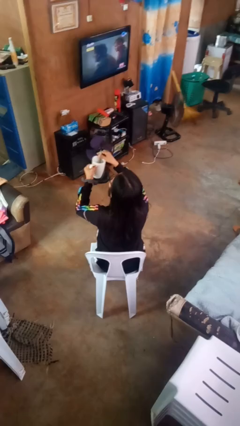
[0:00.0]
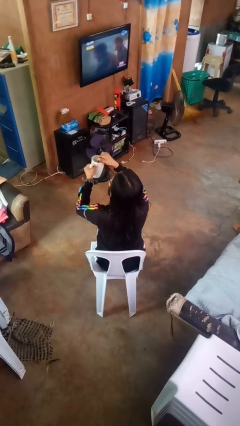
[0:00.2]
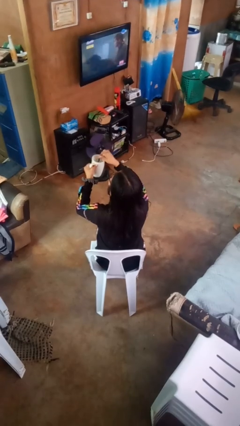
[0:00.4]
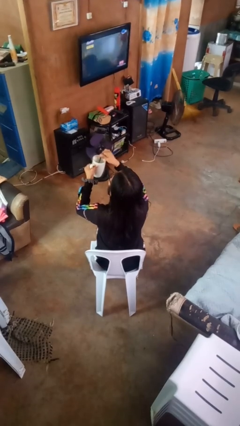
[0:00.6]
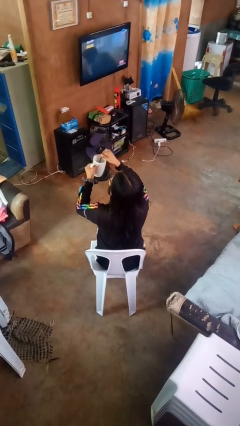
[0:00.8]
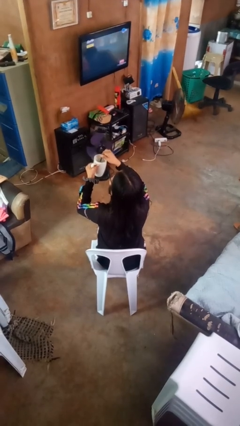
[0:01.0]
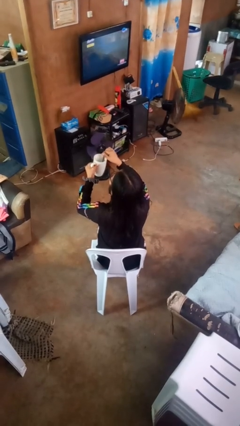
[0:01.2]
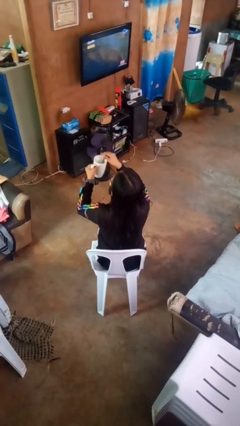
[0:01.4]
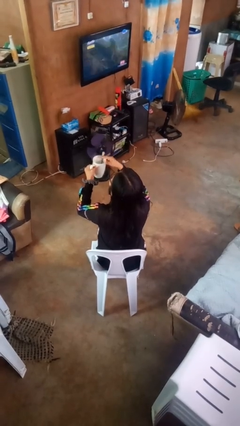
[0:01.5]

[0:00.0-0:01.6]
person stirs mug

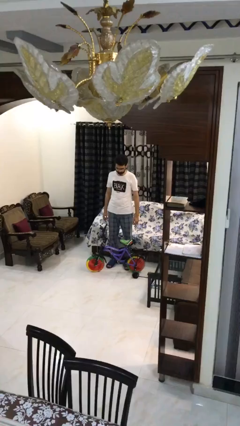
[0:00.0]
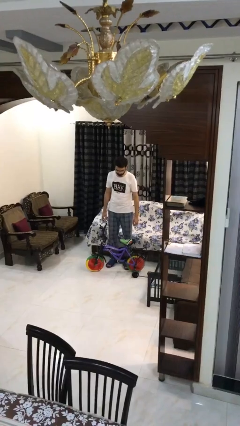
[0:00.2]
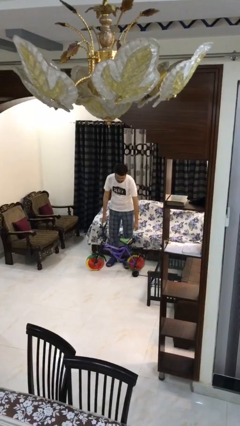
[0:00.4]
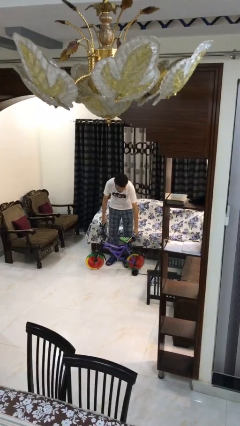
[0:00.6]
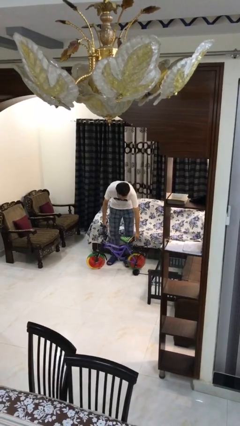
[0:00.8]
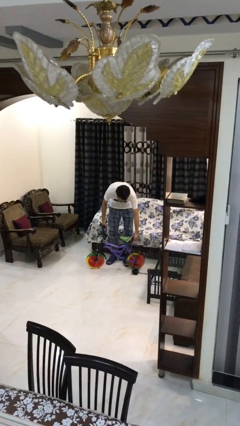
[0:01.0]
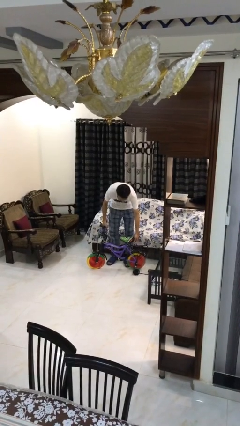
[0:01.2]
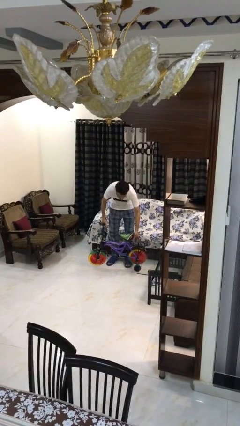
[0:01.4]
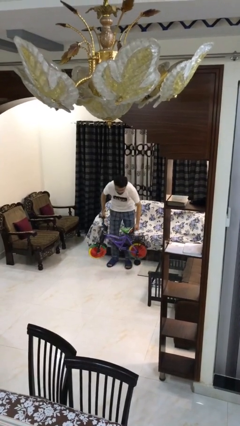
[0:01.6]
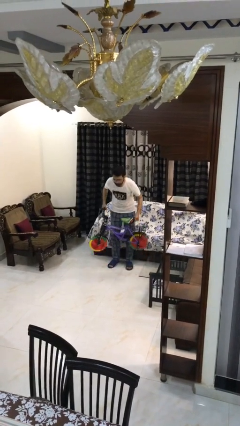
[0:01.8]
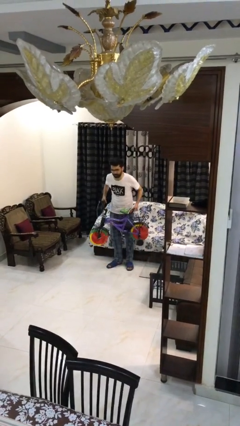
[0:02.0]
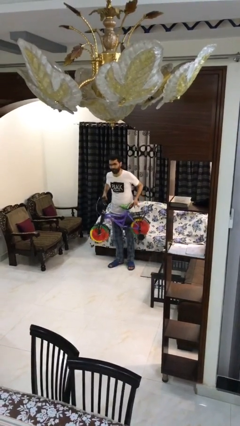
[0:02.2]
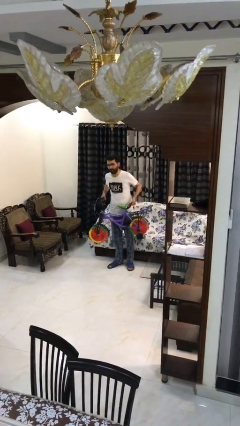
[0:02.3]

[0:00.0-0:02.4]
person picks up object from floor

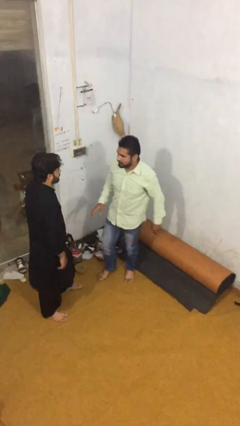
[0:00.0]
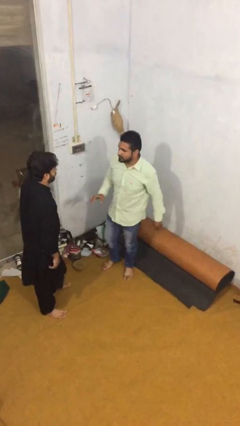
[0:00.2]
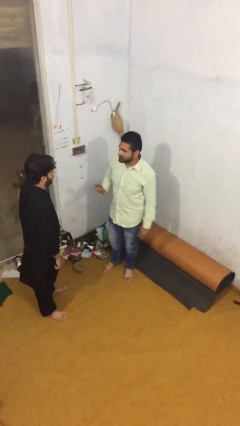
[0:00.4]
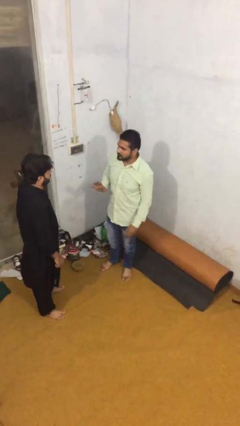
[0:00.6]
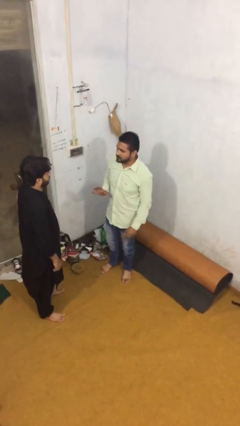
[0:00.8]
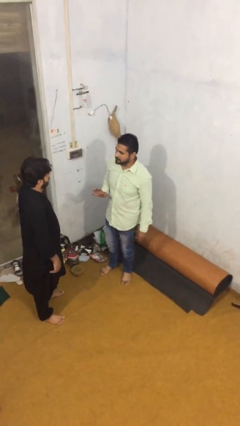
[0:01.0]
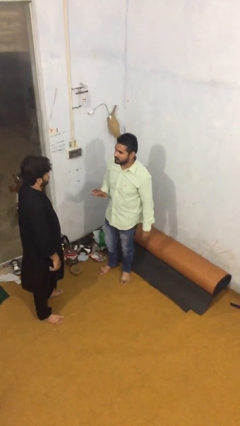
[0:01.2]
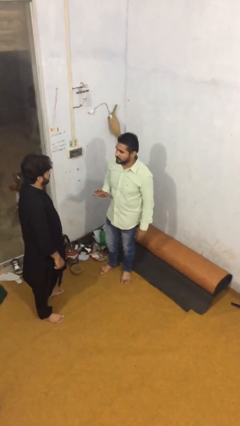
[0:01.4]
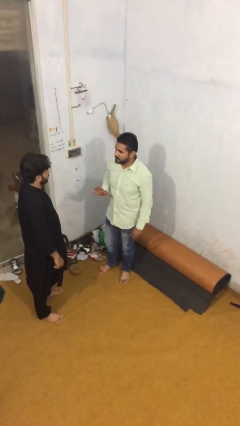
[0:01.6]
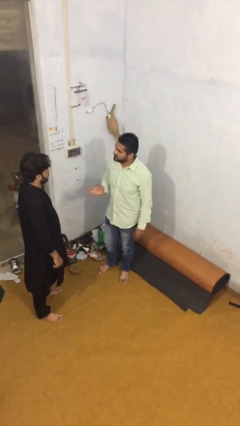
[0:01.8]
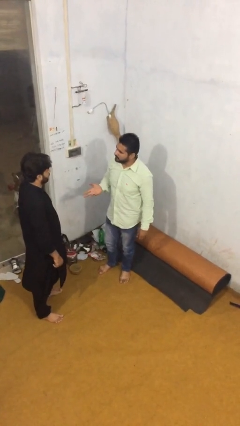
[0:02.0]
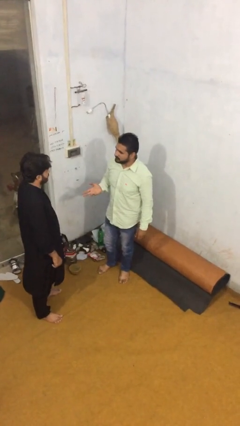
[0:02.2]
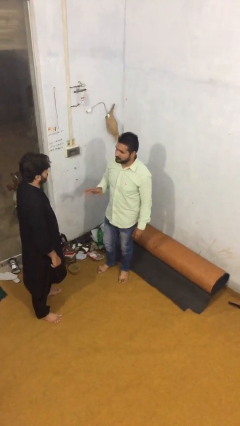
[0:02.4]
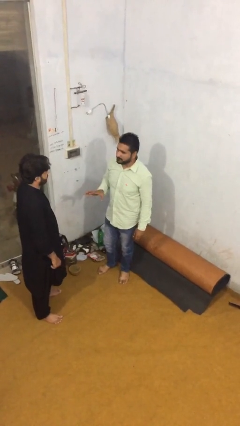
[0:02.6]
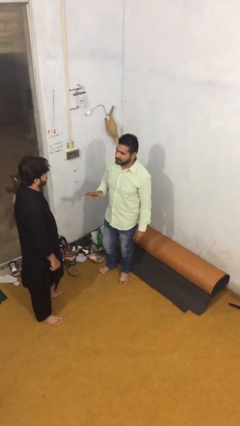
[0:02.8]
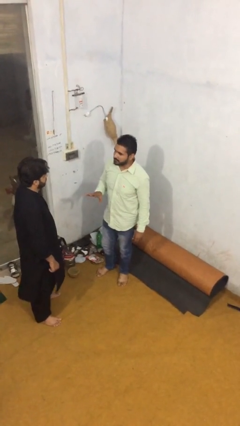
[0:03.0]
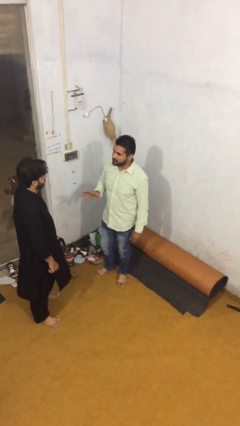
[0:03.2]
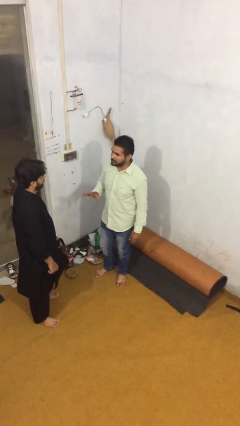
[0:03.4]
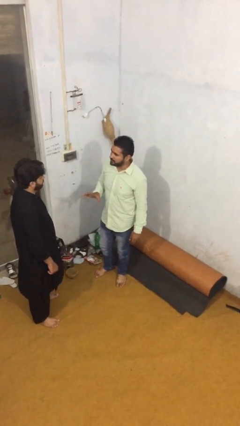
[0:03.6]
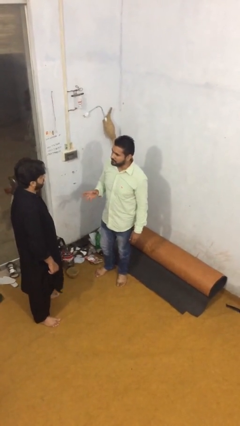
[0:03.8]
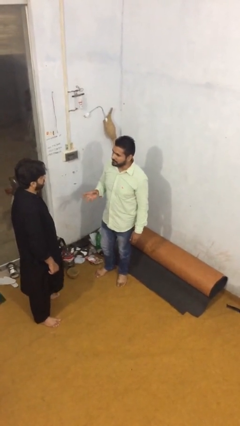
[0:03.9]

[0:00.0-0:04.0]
person talks to person

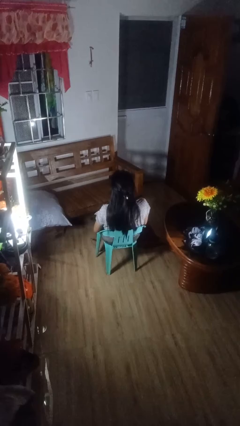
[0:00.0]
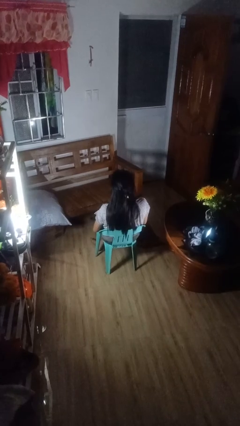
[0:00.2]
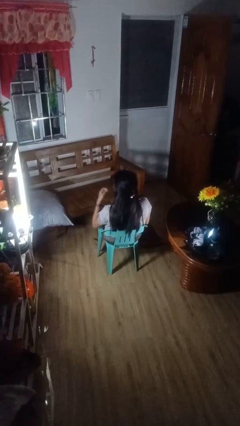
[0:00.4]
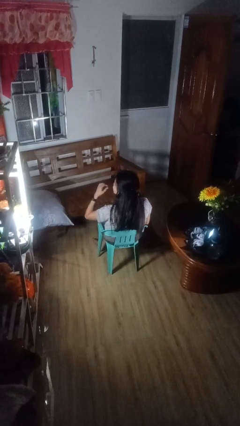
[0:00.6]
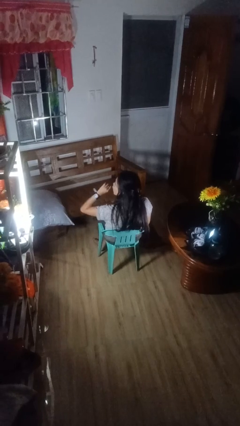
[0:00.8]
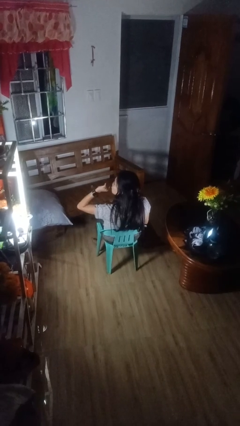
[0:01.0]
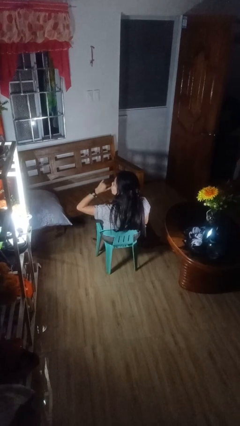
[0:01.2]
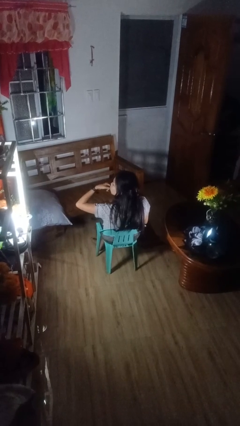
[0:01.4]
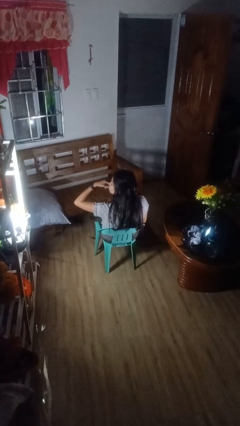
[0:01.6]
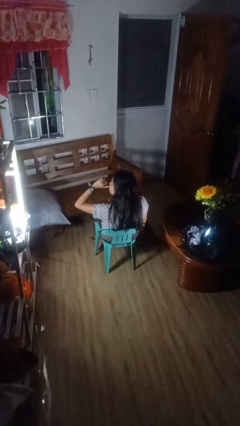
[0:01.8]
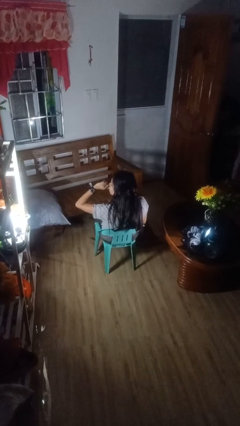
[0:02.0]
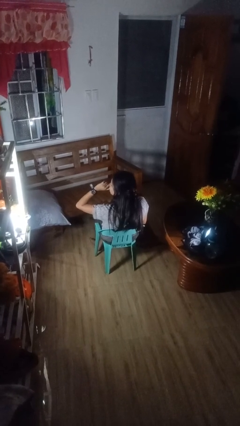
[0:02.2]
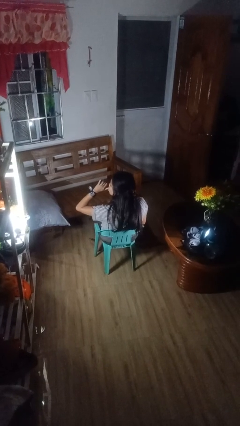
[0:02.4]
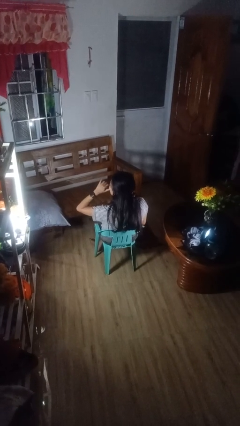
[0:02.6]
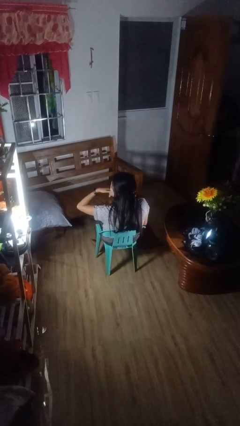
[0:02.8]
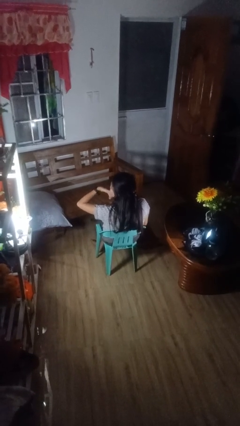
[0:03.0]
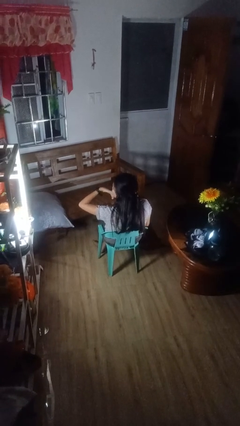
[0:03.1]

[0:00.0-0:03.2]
person licks fingers

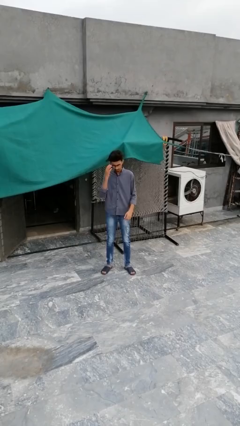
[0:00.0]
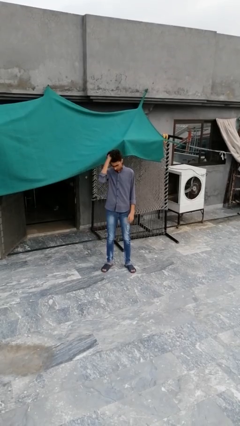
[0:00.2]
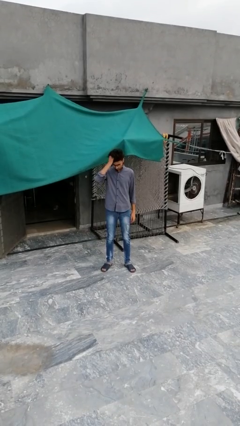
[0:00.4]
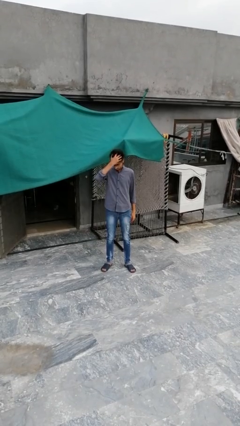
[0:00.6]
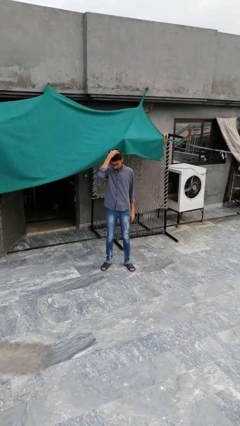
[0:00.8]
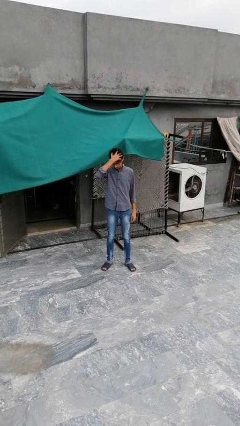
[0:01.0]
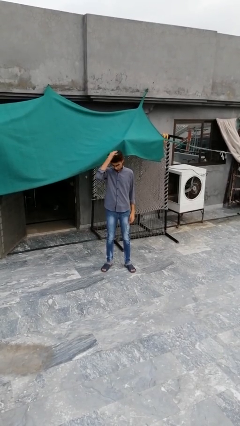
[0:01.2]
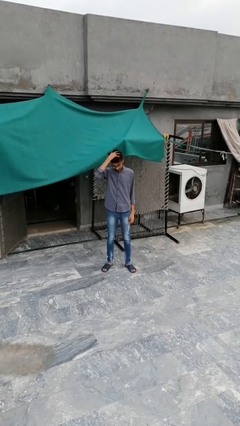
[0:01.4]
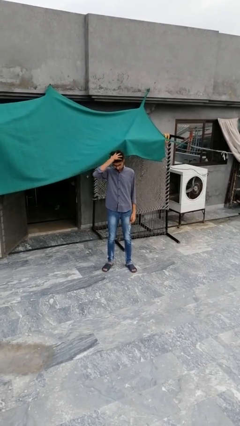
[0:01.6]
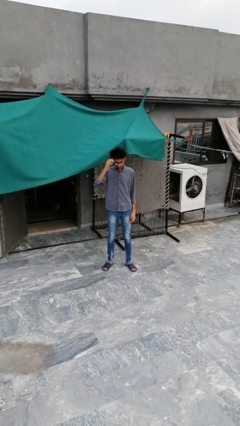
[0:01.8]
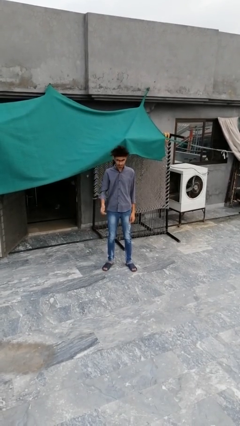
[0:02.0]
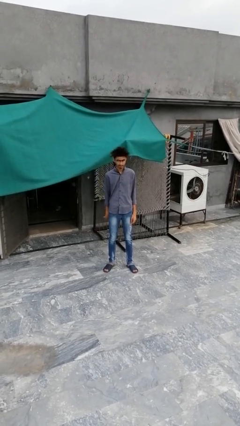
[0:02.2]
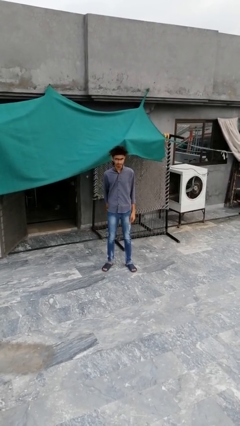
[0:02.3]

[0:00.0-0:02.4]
person strokes hair

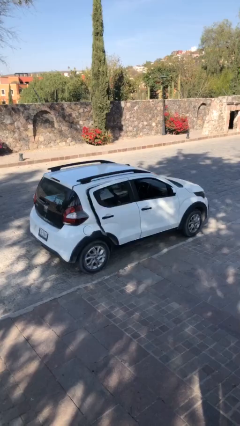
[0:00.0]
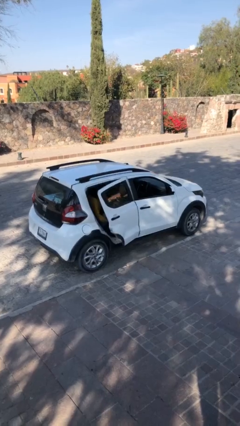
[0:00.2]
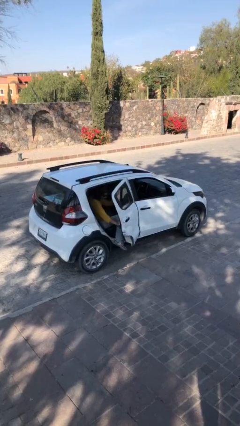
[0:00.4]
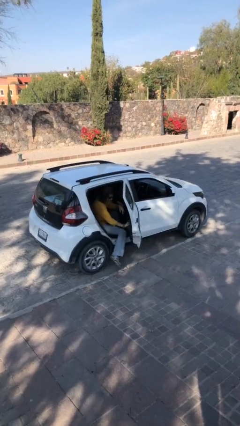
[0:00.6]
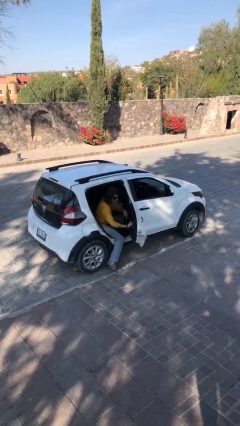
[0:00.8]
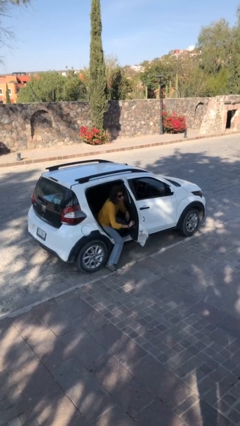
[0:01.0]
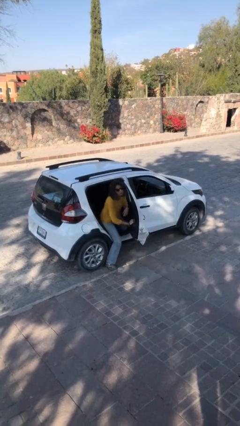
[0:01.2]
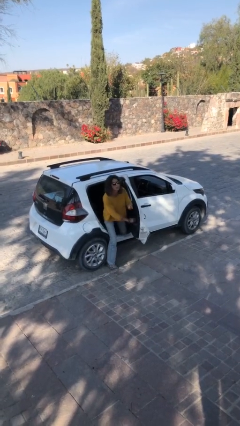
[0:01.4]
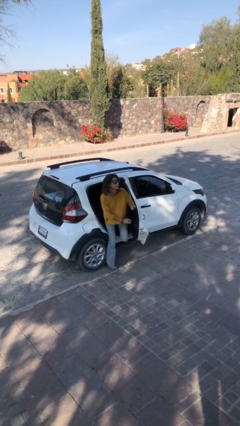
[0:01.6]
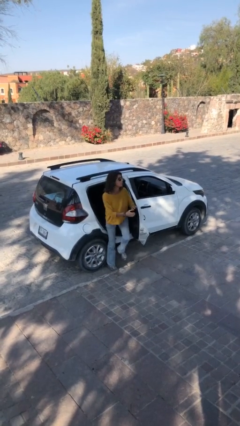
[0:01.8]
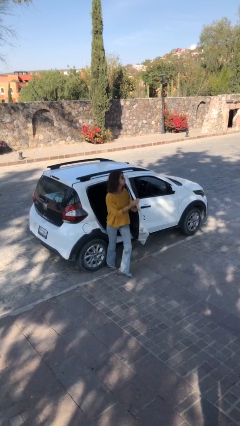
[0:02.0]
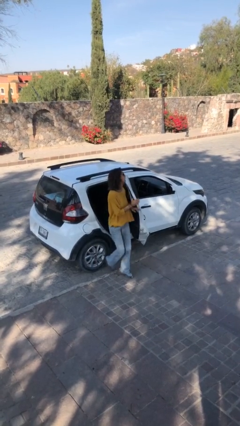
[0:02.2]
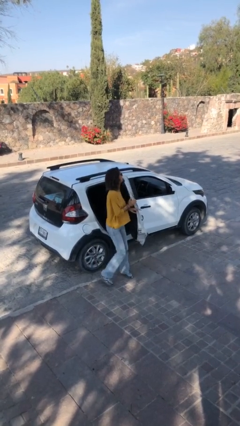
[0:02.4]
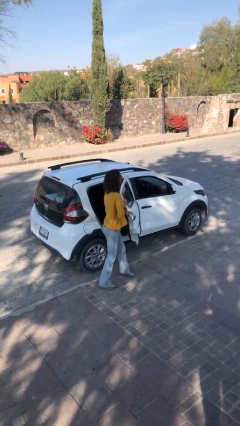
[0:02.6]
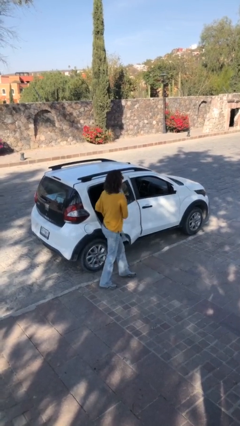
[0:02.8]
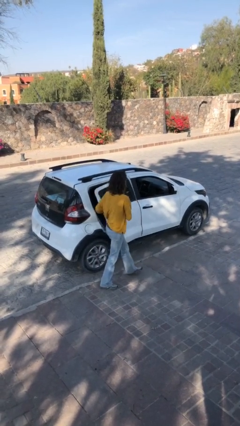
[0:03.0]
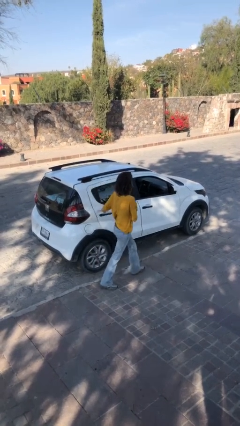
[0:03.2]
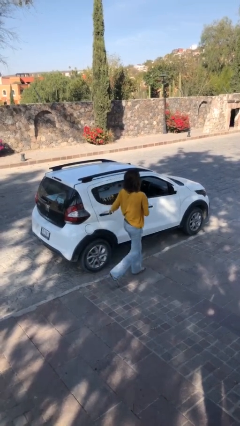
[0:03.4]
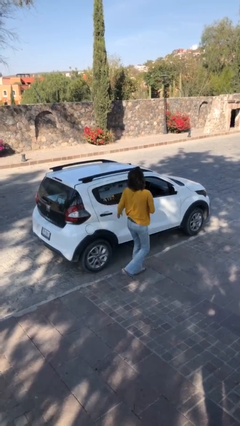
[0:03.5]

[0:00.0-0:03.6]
car drops off person

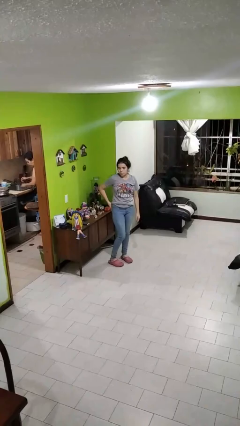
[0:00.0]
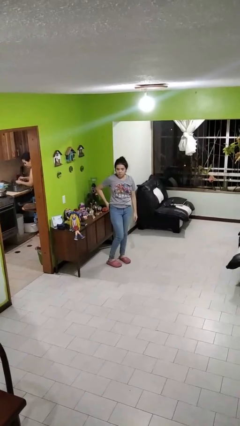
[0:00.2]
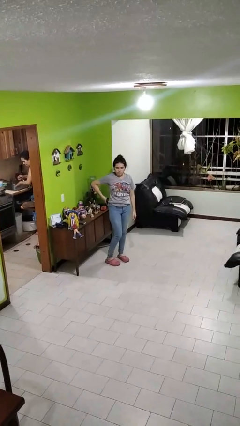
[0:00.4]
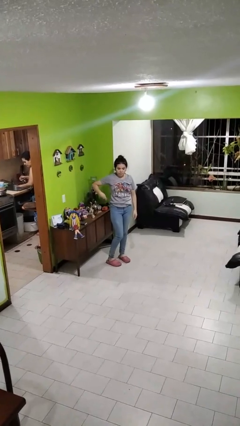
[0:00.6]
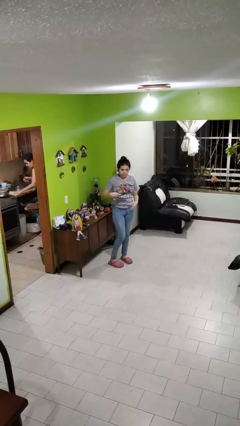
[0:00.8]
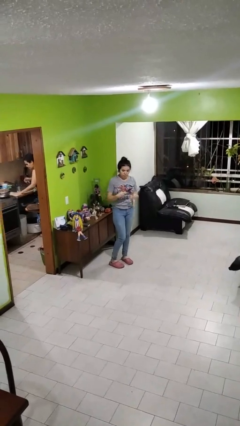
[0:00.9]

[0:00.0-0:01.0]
person takes phone from pocket
